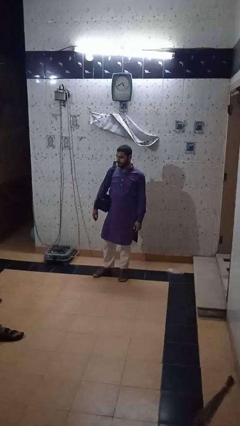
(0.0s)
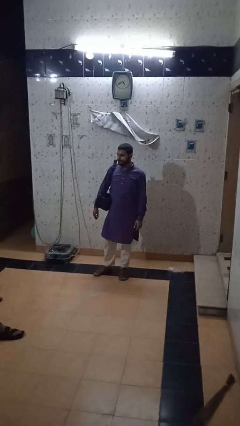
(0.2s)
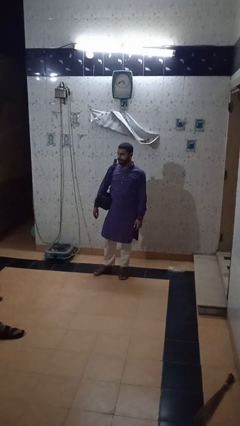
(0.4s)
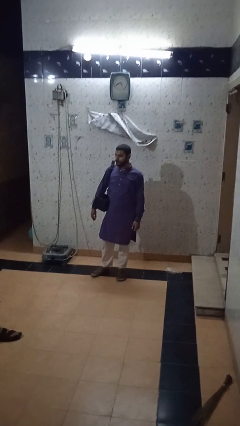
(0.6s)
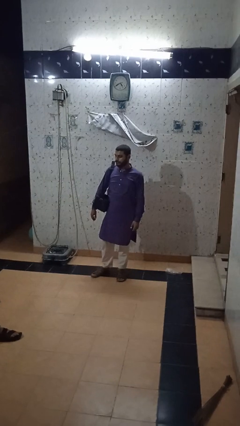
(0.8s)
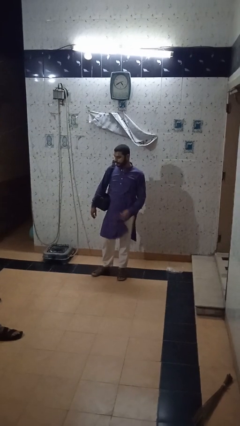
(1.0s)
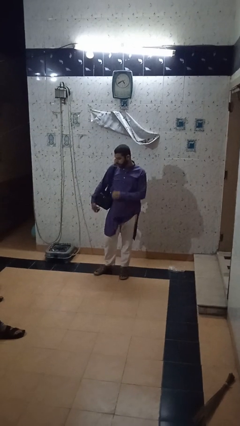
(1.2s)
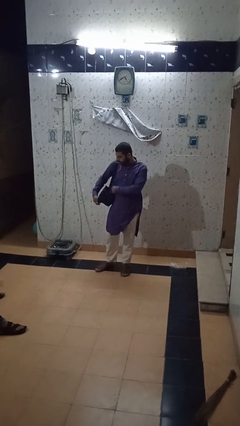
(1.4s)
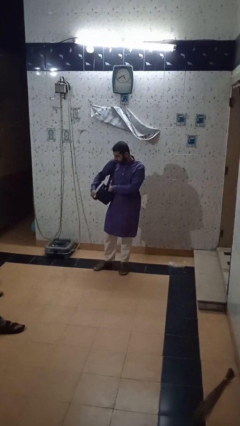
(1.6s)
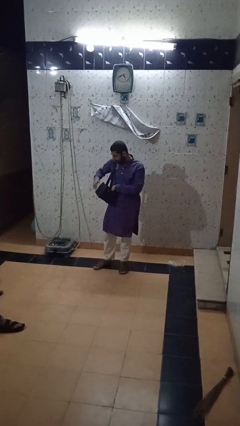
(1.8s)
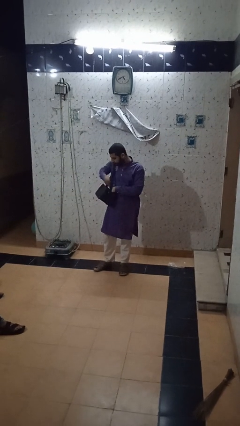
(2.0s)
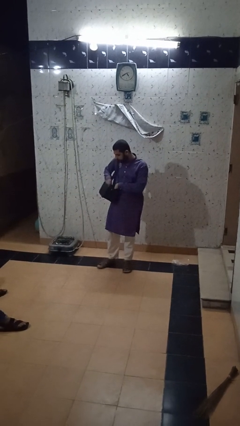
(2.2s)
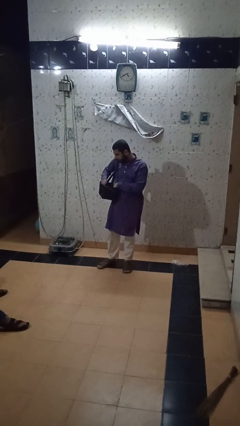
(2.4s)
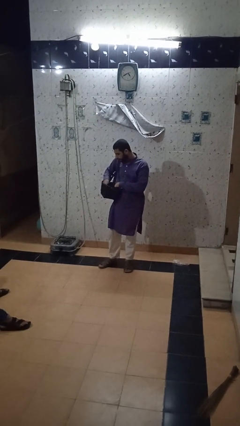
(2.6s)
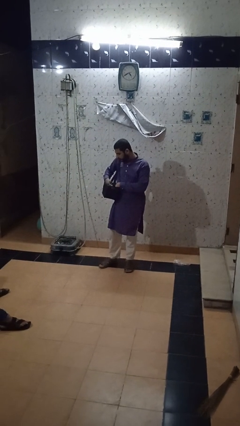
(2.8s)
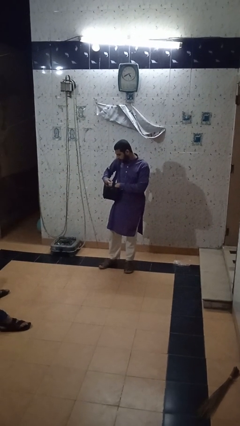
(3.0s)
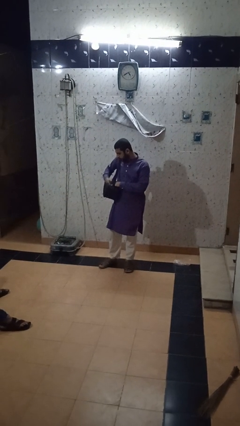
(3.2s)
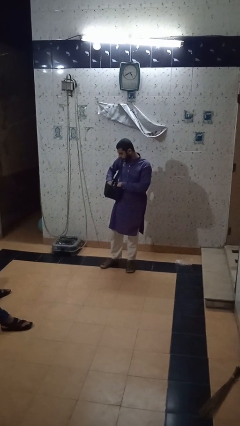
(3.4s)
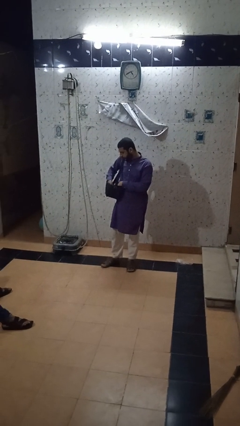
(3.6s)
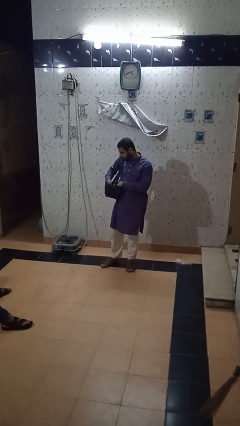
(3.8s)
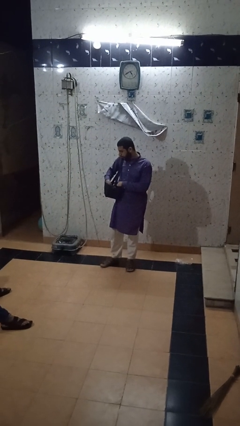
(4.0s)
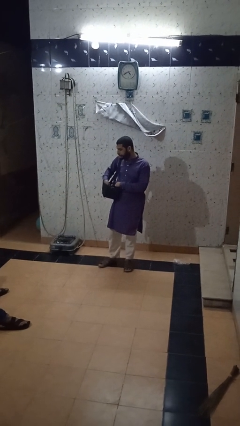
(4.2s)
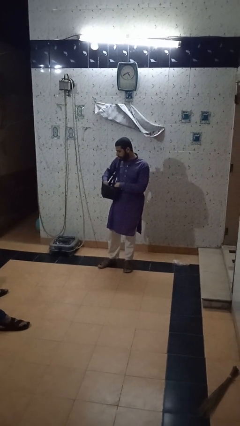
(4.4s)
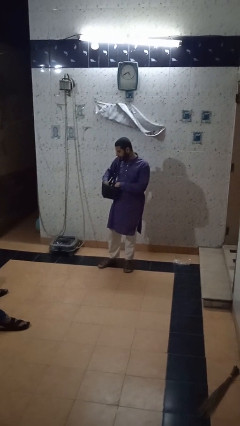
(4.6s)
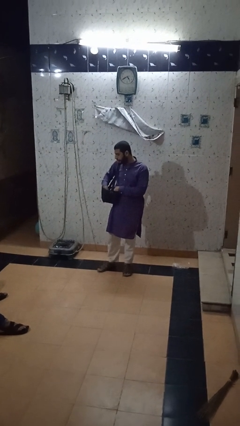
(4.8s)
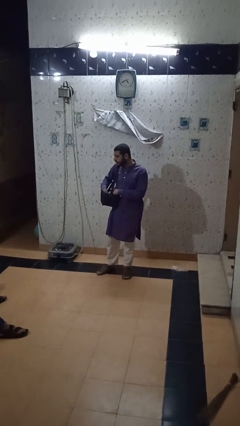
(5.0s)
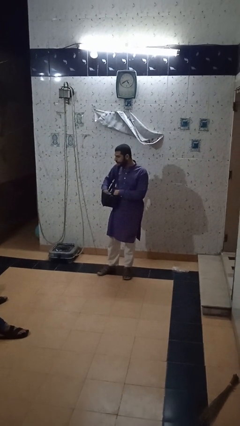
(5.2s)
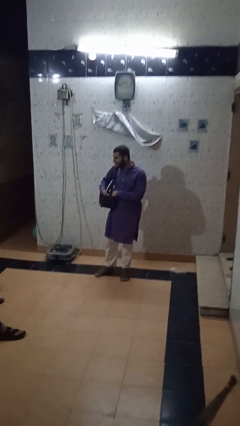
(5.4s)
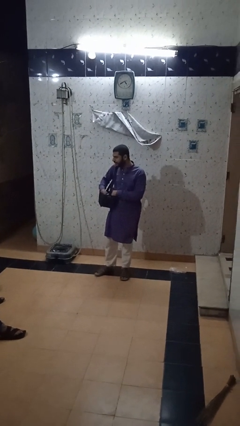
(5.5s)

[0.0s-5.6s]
person searches in backpack

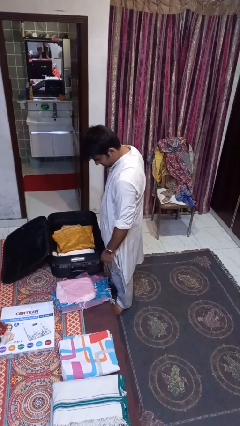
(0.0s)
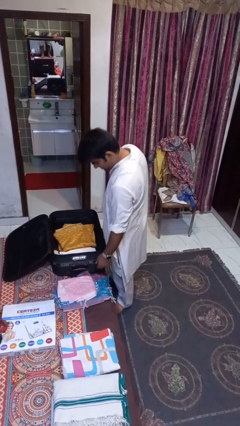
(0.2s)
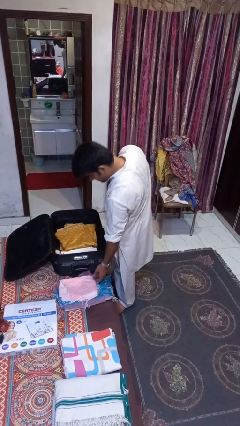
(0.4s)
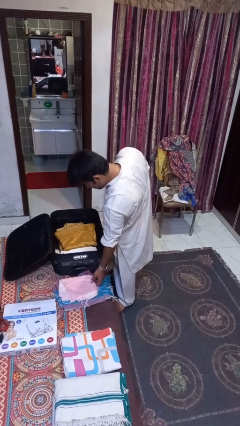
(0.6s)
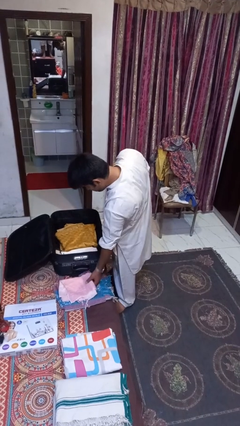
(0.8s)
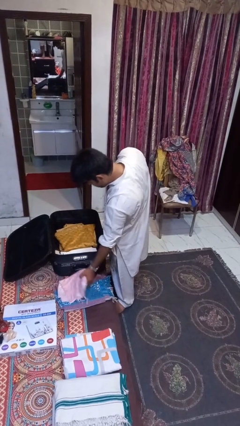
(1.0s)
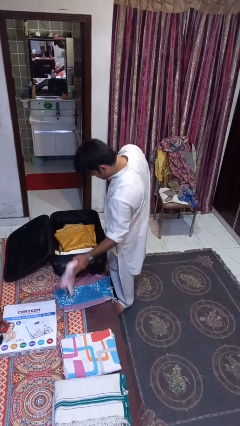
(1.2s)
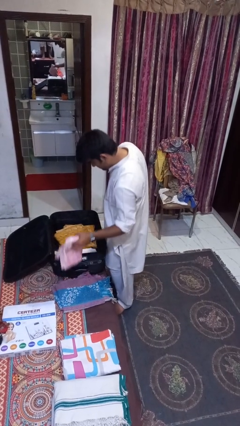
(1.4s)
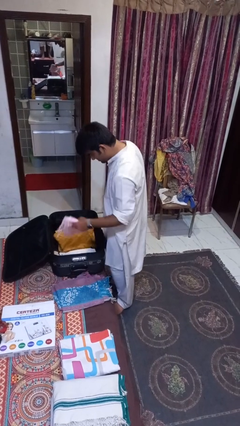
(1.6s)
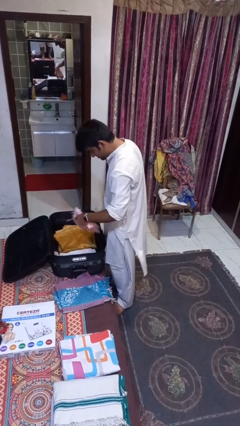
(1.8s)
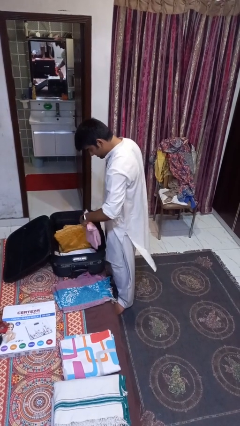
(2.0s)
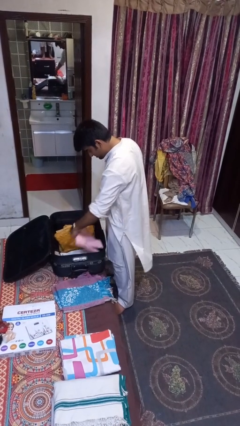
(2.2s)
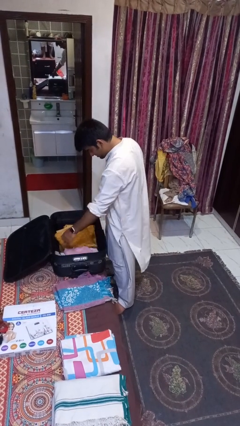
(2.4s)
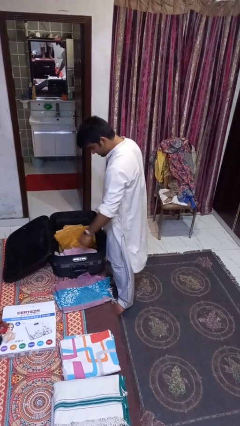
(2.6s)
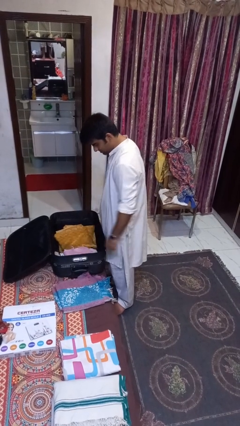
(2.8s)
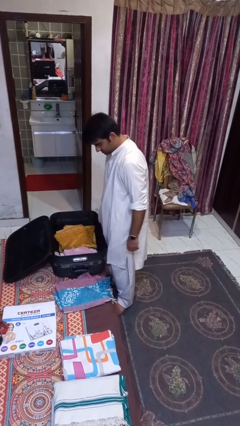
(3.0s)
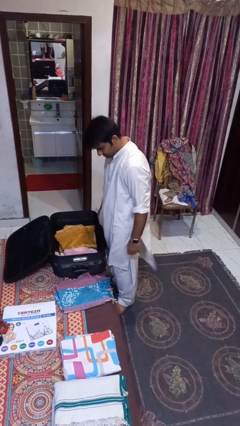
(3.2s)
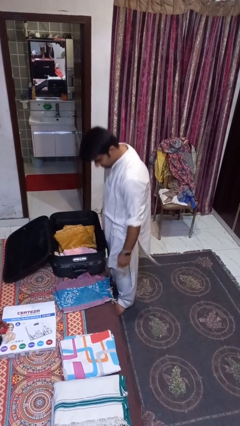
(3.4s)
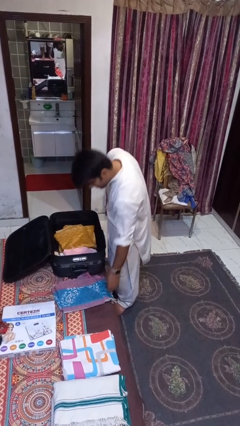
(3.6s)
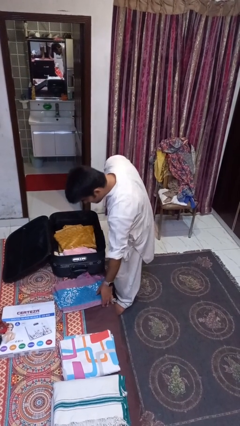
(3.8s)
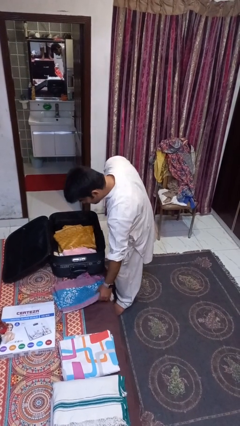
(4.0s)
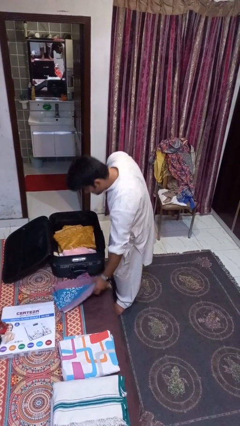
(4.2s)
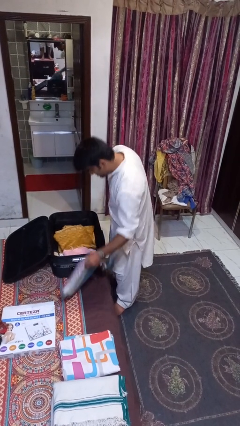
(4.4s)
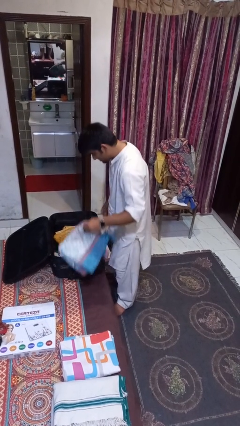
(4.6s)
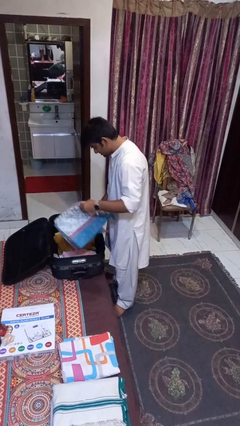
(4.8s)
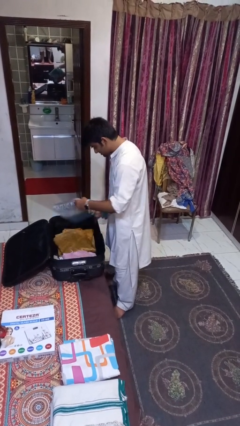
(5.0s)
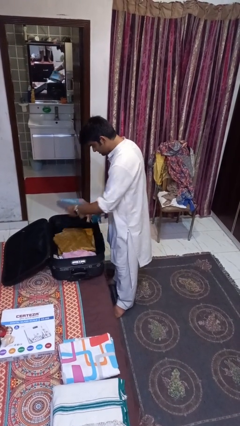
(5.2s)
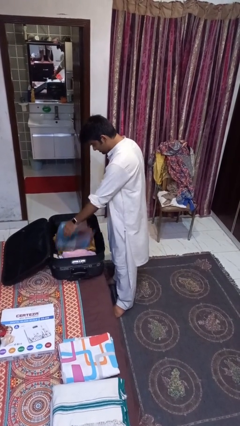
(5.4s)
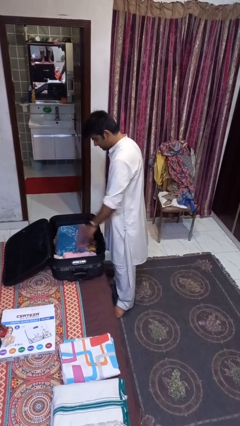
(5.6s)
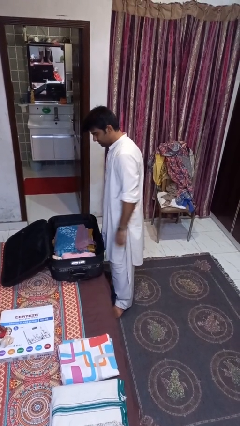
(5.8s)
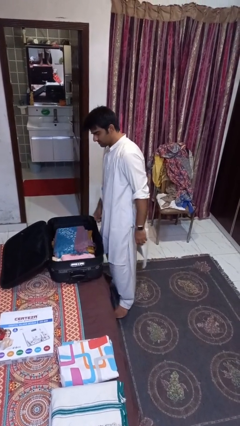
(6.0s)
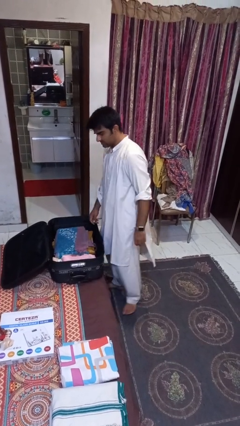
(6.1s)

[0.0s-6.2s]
person loads clothes into suitcase

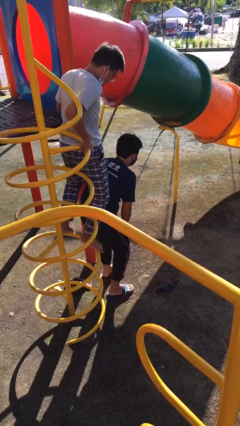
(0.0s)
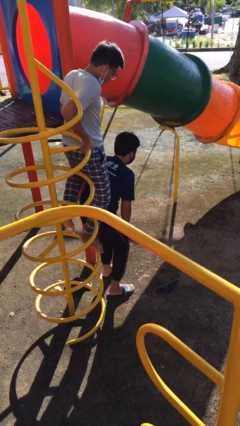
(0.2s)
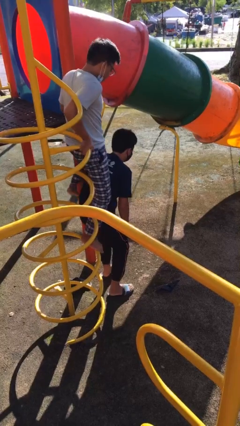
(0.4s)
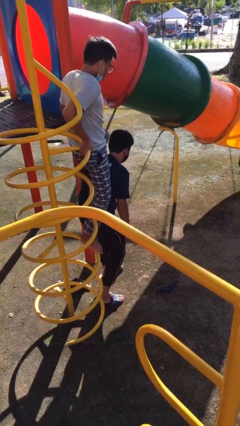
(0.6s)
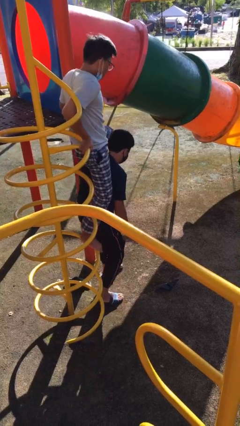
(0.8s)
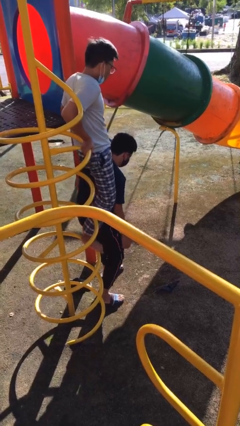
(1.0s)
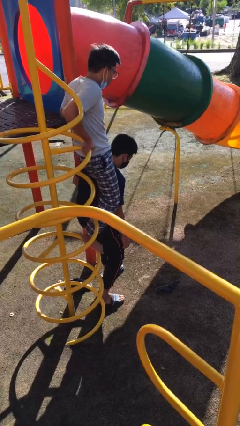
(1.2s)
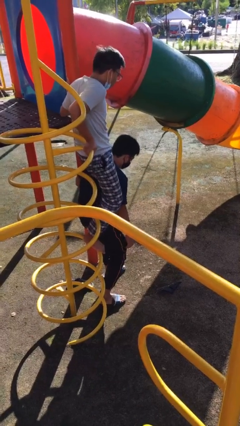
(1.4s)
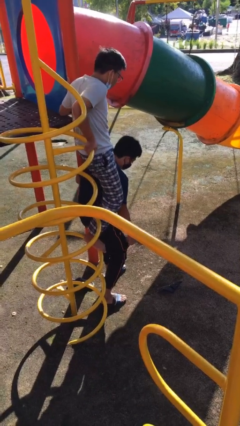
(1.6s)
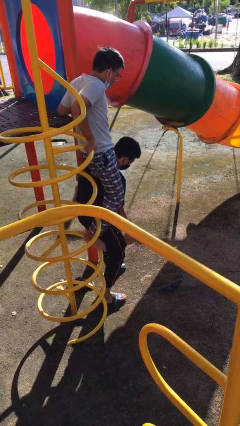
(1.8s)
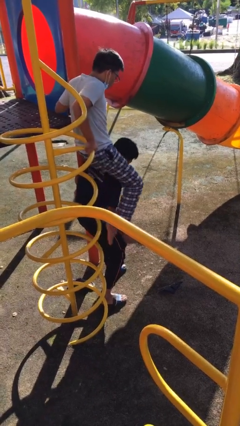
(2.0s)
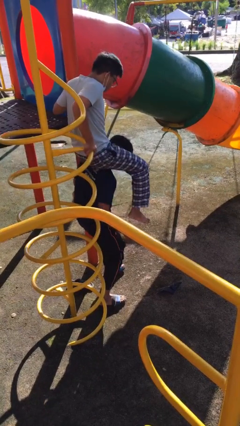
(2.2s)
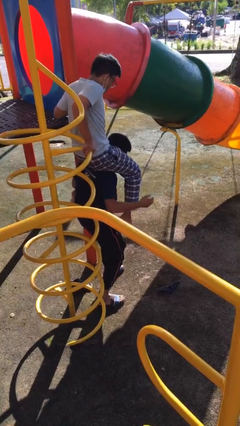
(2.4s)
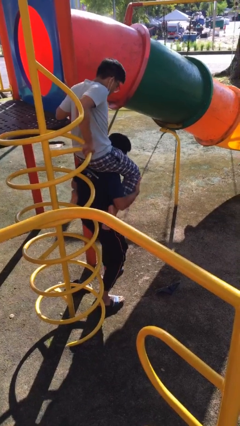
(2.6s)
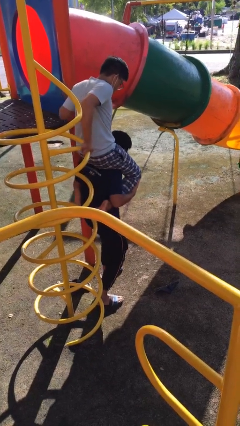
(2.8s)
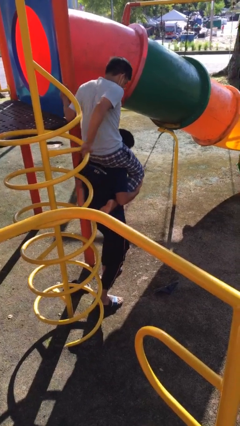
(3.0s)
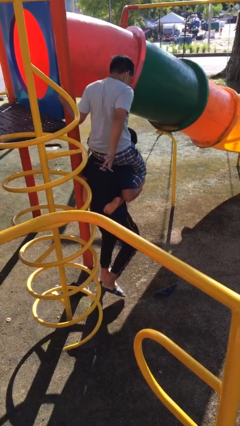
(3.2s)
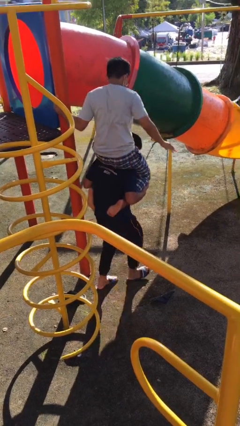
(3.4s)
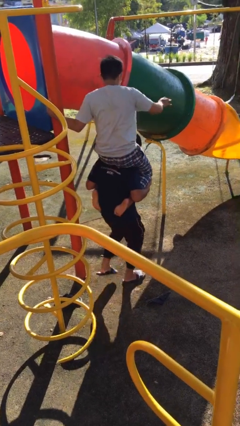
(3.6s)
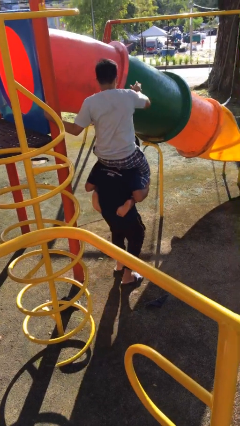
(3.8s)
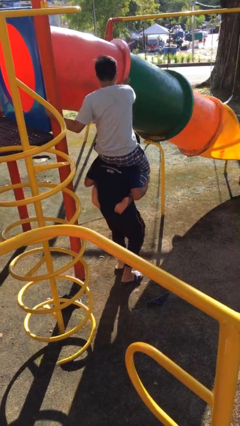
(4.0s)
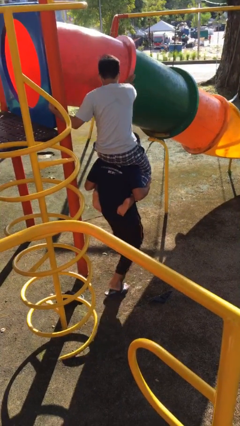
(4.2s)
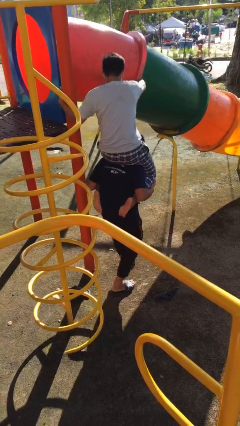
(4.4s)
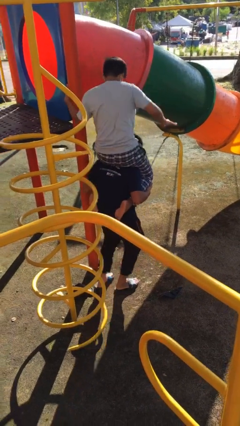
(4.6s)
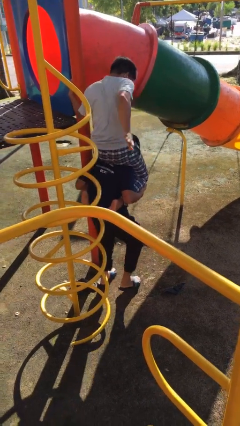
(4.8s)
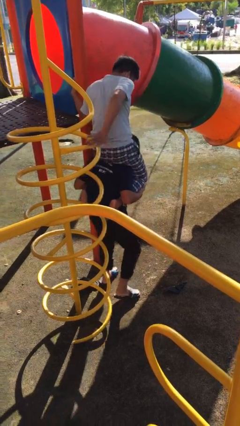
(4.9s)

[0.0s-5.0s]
person carries person on shoulders

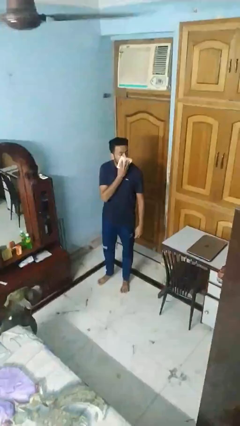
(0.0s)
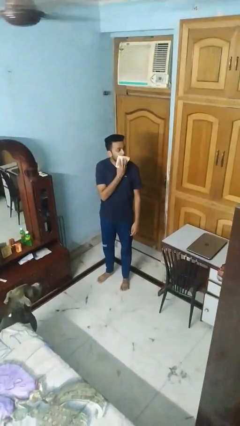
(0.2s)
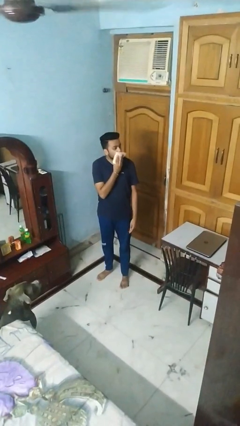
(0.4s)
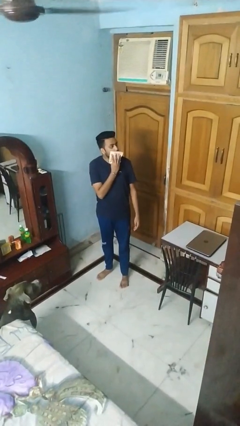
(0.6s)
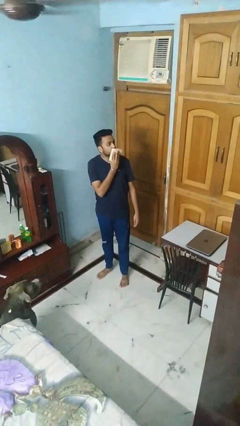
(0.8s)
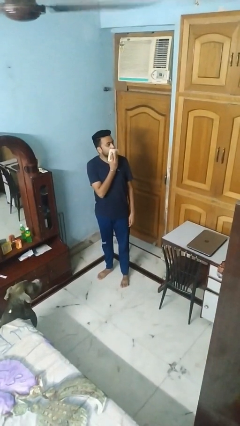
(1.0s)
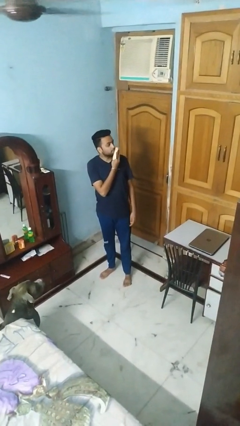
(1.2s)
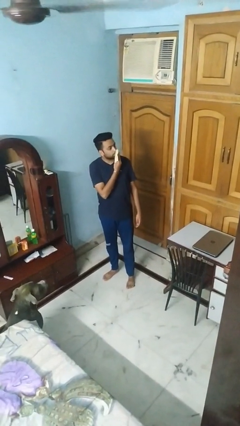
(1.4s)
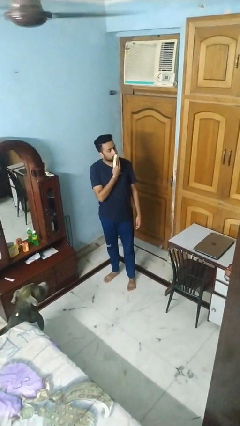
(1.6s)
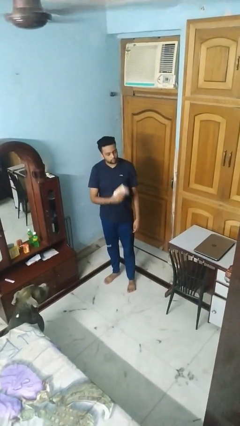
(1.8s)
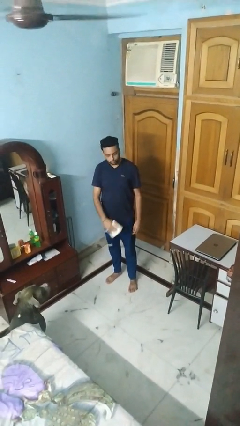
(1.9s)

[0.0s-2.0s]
person wipes mouth with napkin
